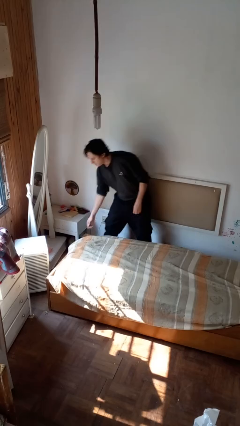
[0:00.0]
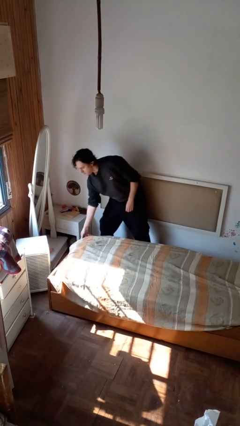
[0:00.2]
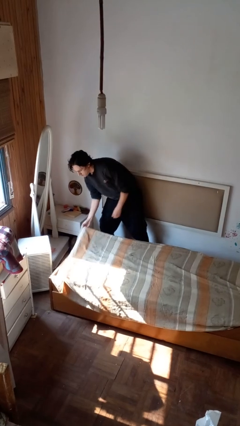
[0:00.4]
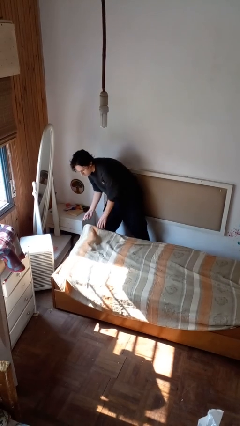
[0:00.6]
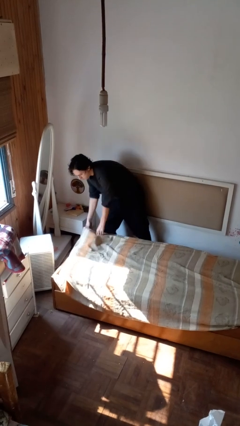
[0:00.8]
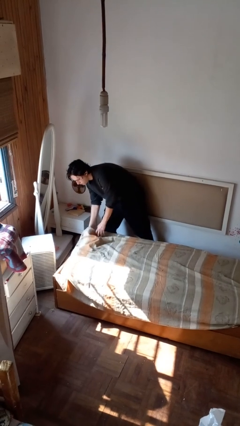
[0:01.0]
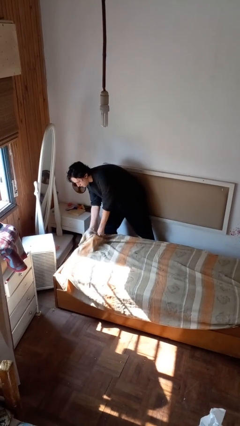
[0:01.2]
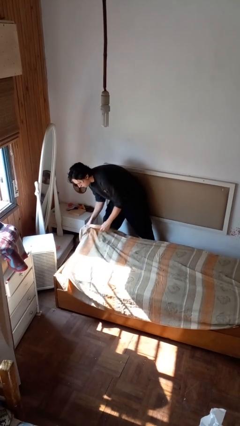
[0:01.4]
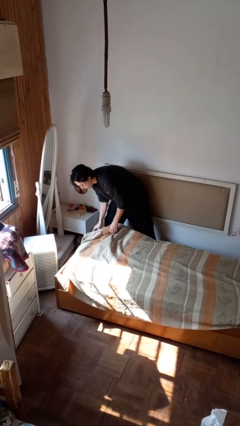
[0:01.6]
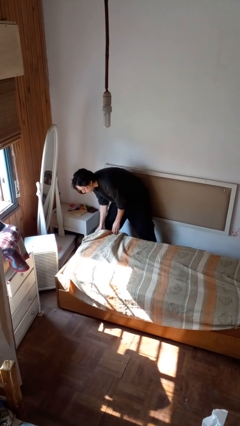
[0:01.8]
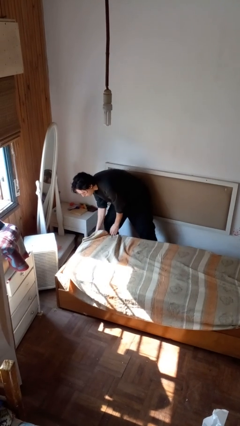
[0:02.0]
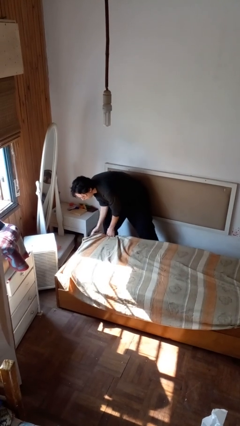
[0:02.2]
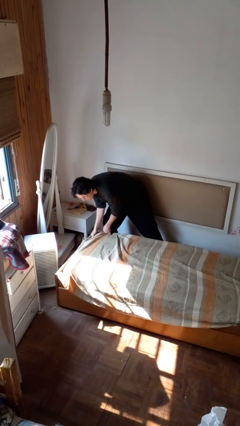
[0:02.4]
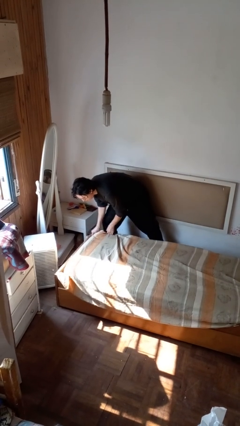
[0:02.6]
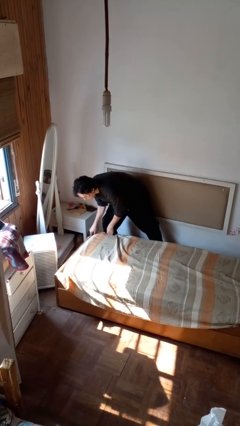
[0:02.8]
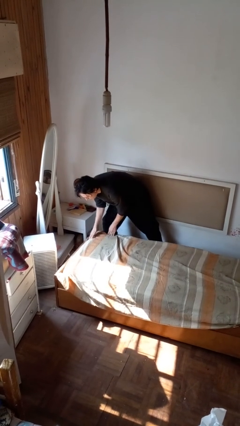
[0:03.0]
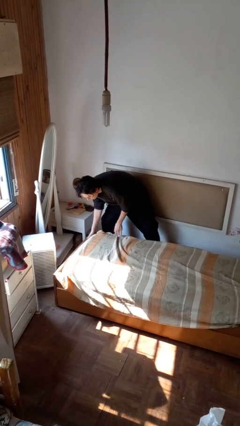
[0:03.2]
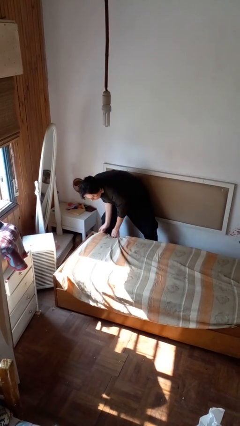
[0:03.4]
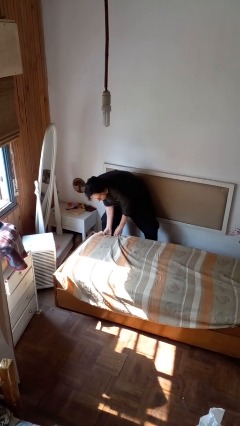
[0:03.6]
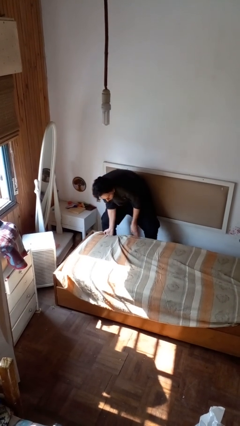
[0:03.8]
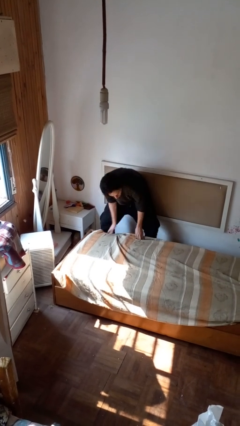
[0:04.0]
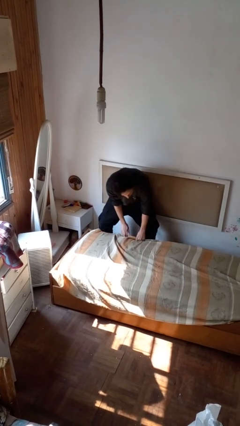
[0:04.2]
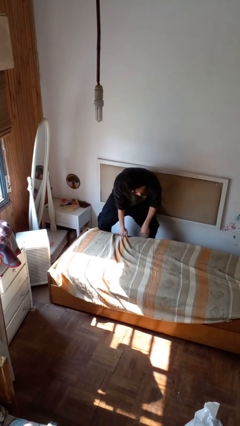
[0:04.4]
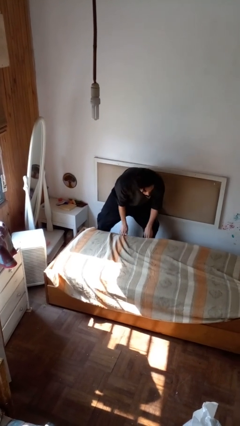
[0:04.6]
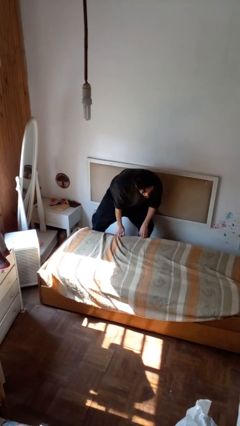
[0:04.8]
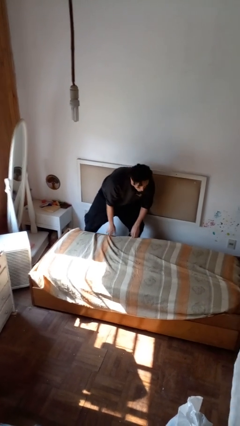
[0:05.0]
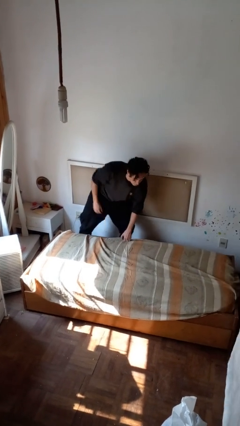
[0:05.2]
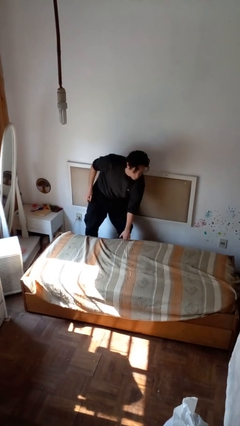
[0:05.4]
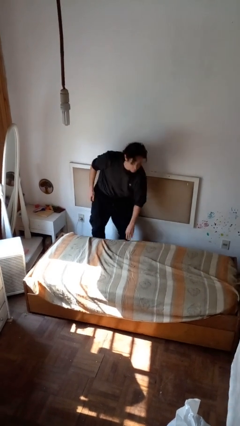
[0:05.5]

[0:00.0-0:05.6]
person makes bed

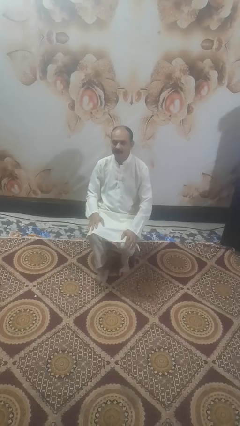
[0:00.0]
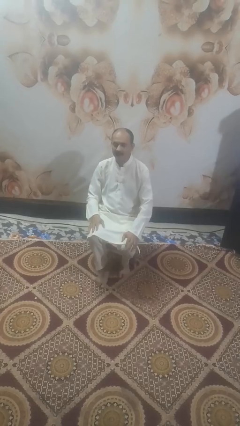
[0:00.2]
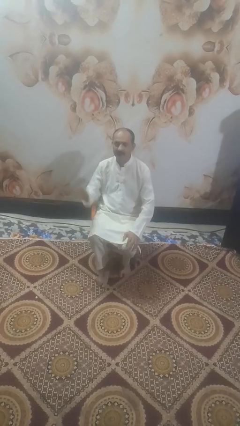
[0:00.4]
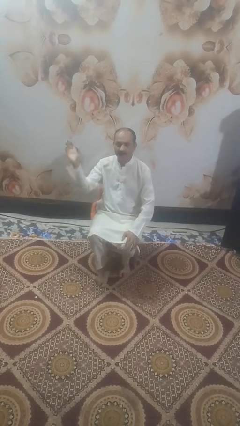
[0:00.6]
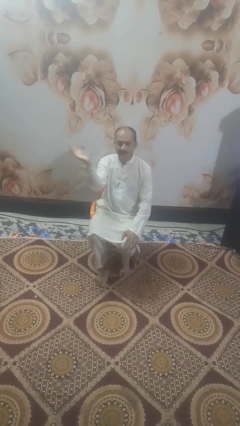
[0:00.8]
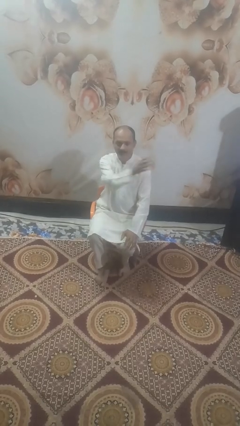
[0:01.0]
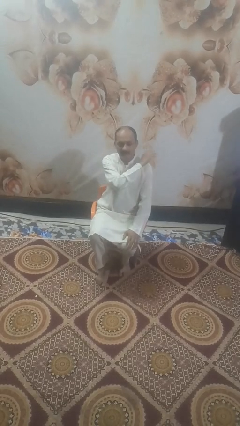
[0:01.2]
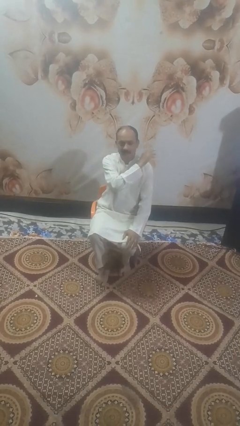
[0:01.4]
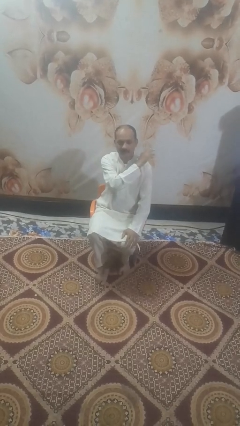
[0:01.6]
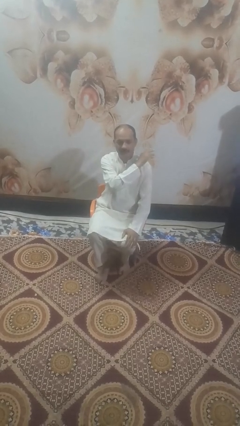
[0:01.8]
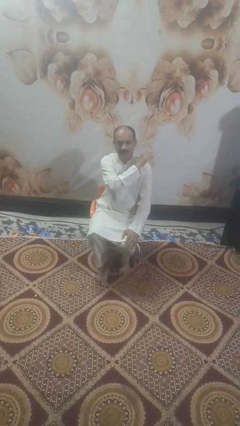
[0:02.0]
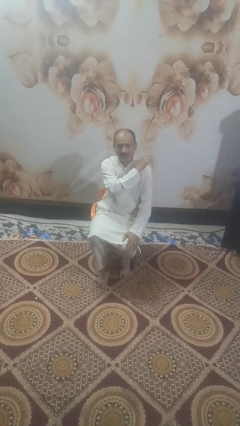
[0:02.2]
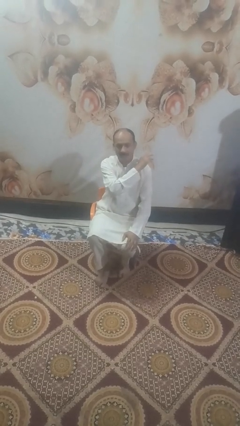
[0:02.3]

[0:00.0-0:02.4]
person gestures swipe left

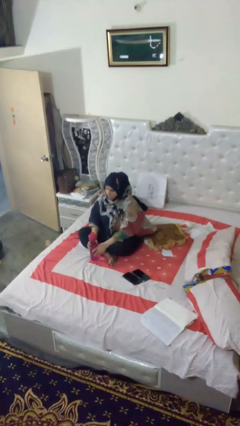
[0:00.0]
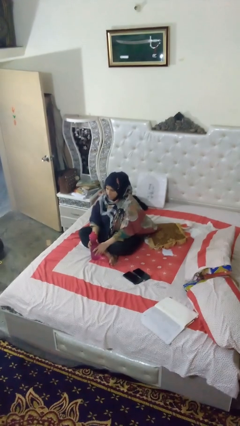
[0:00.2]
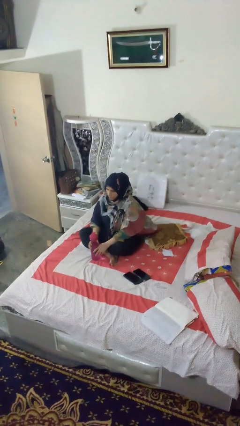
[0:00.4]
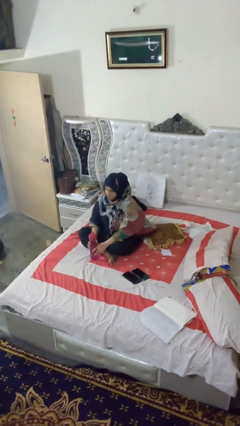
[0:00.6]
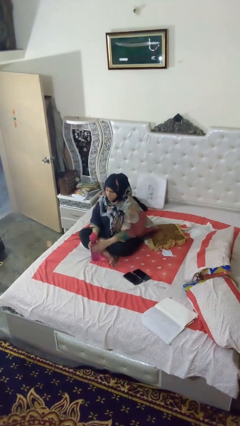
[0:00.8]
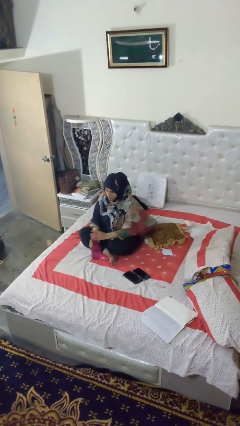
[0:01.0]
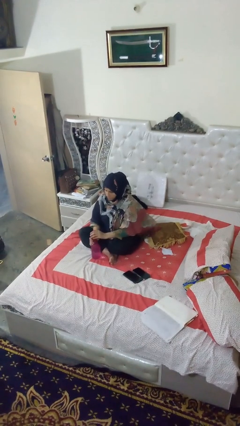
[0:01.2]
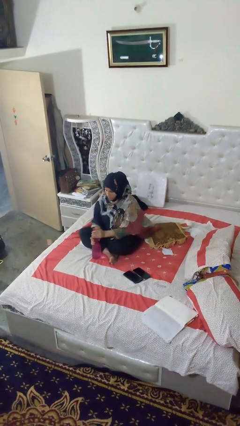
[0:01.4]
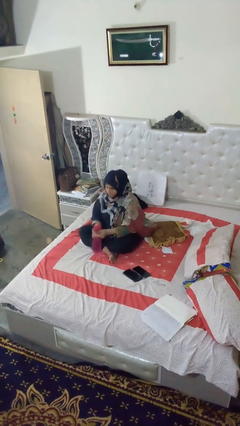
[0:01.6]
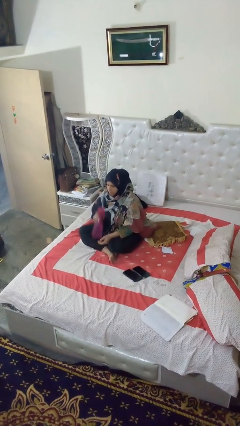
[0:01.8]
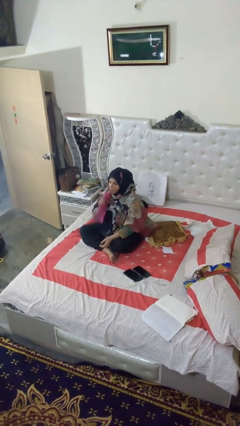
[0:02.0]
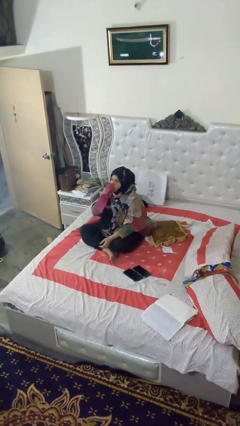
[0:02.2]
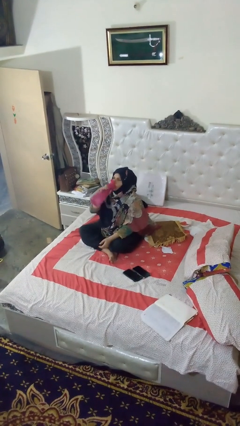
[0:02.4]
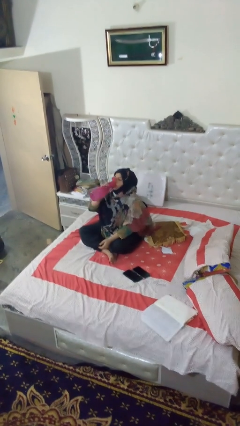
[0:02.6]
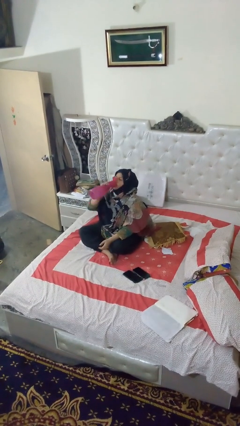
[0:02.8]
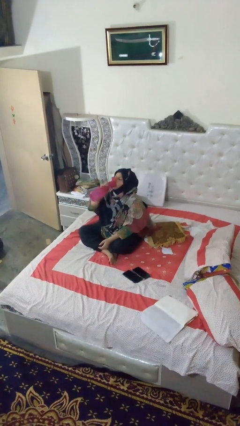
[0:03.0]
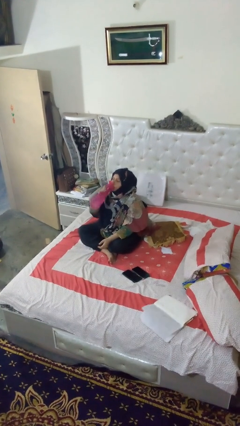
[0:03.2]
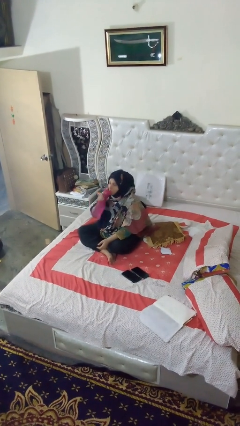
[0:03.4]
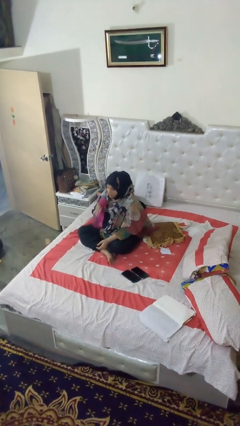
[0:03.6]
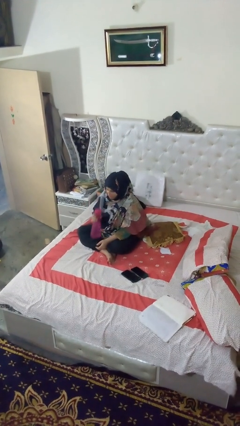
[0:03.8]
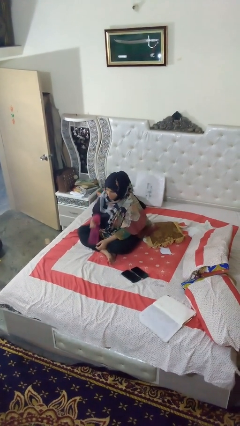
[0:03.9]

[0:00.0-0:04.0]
person drinks from bottle

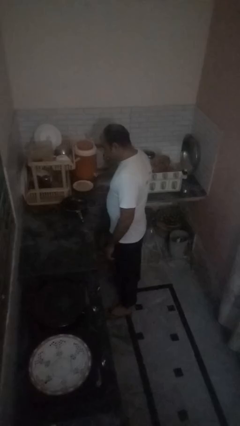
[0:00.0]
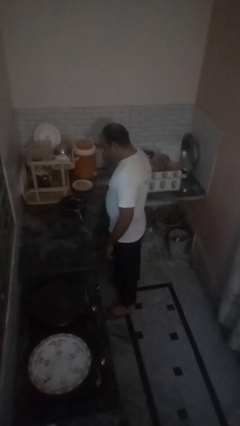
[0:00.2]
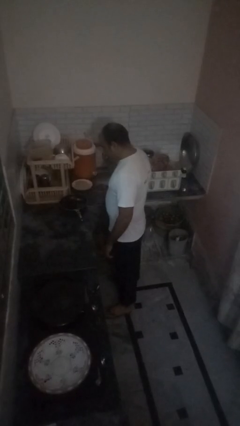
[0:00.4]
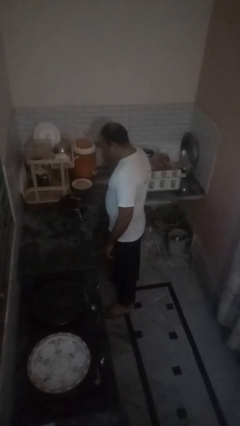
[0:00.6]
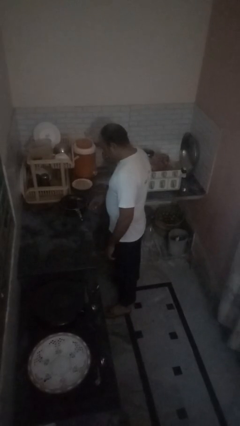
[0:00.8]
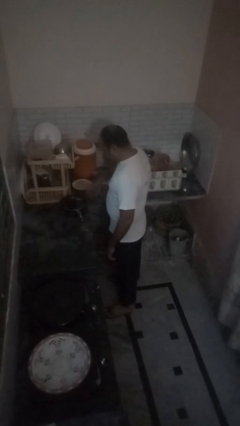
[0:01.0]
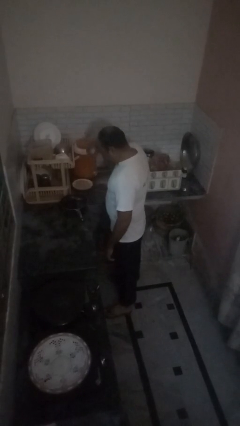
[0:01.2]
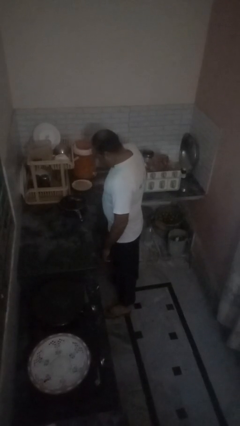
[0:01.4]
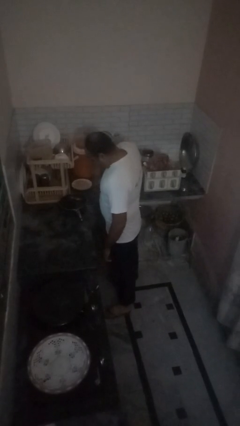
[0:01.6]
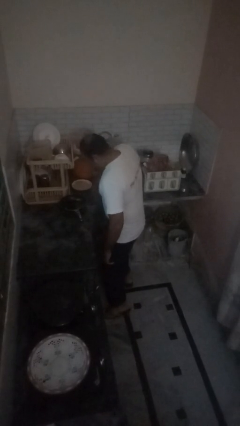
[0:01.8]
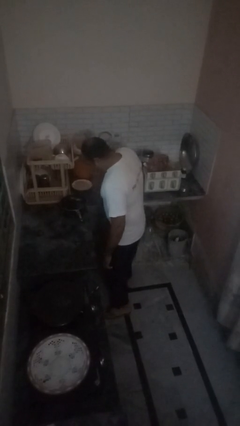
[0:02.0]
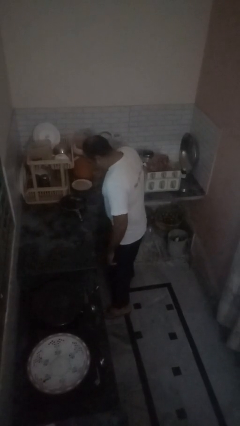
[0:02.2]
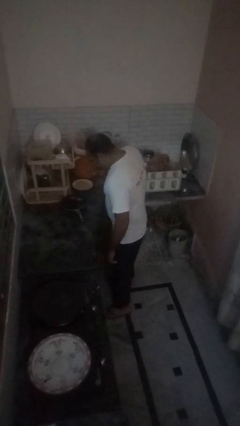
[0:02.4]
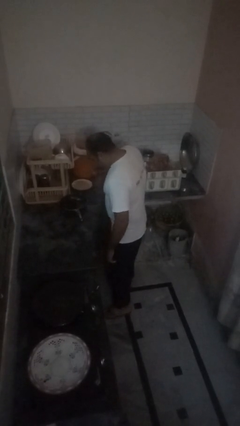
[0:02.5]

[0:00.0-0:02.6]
person burns hand

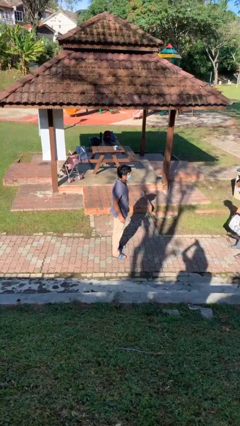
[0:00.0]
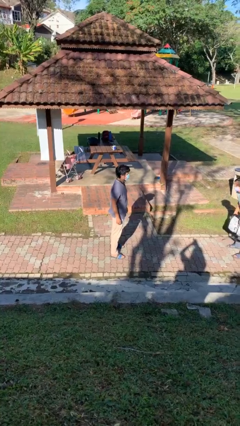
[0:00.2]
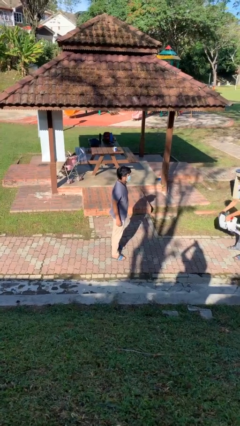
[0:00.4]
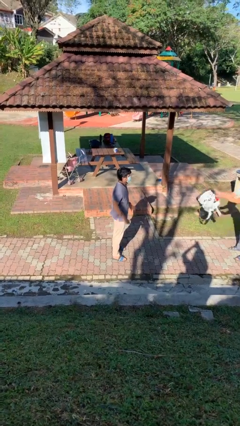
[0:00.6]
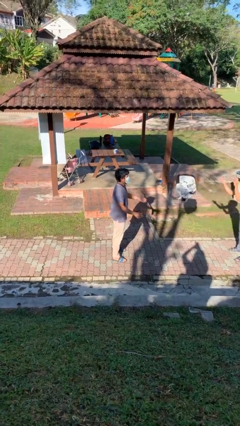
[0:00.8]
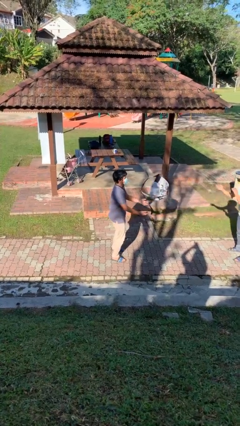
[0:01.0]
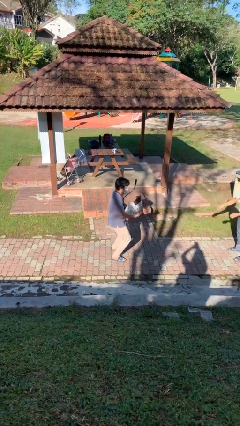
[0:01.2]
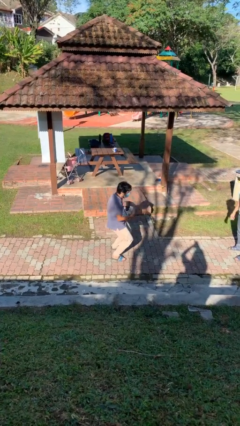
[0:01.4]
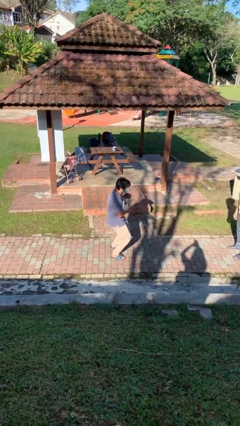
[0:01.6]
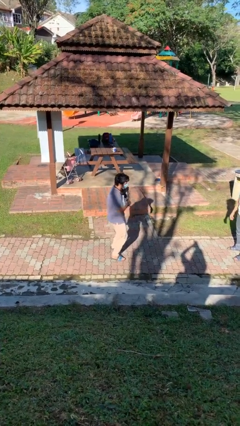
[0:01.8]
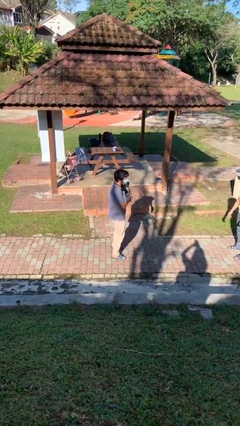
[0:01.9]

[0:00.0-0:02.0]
person catches object from person

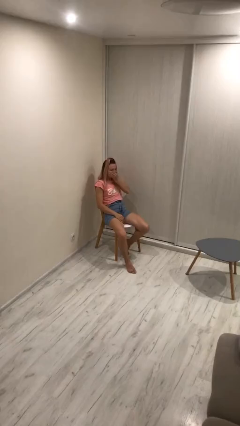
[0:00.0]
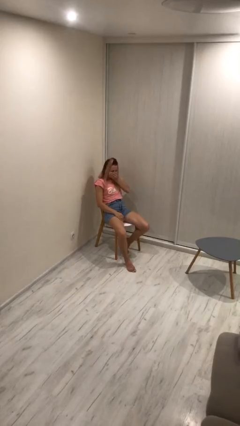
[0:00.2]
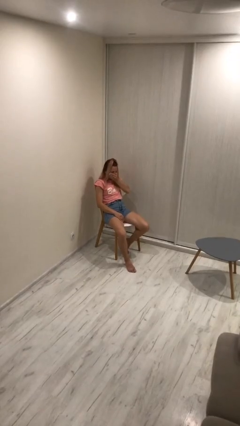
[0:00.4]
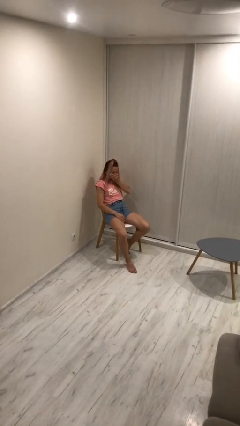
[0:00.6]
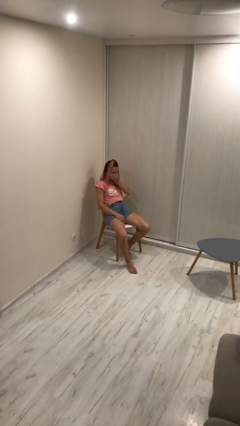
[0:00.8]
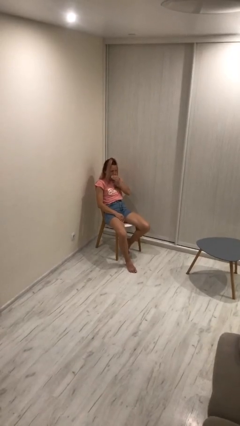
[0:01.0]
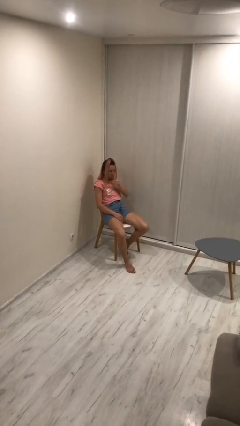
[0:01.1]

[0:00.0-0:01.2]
person sneezes into hand
